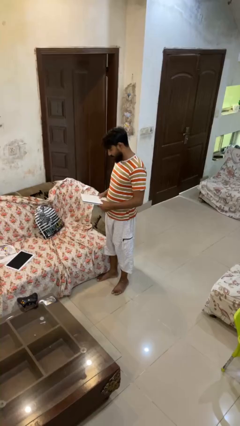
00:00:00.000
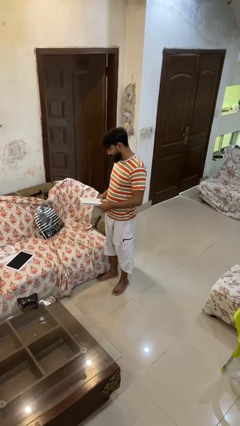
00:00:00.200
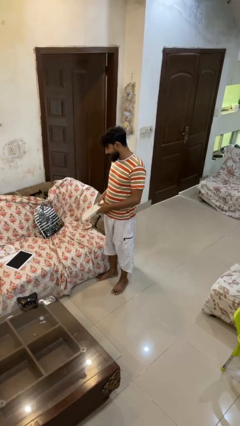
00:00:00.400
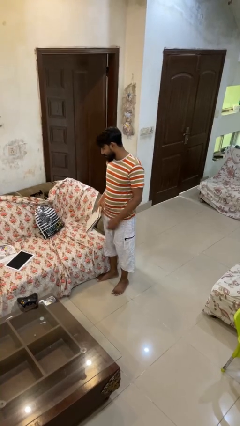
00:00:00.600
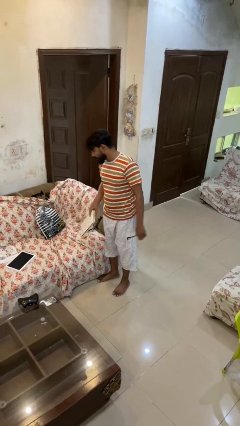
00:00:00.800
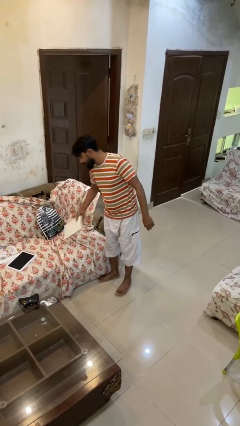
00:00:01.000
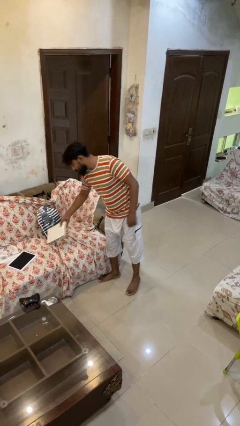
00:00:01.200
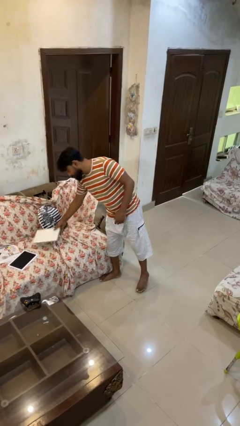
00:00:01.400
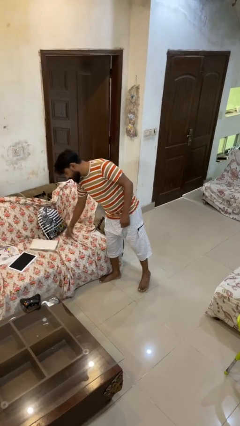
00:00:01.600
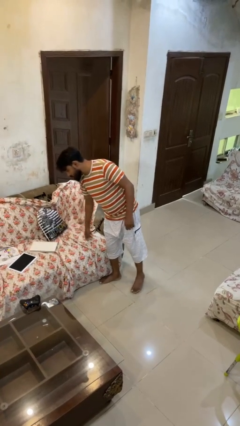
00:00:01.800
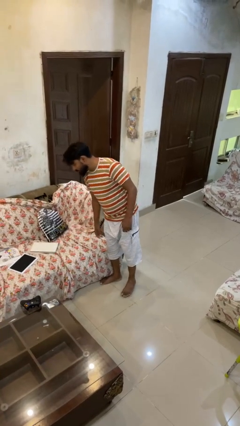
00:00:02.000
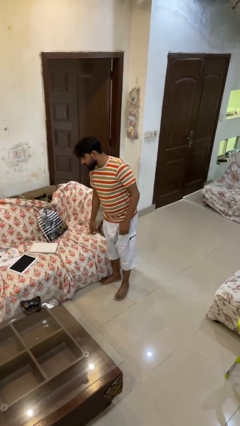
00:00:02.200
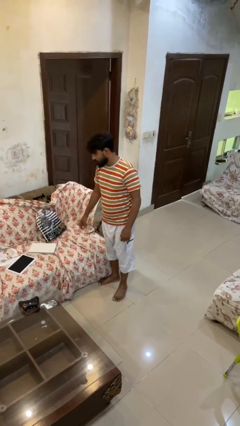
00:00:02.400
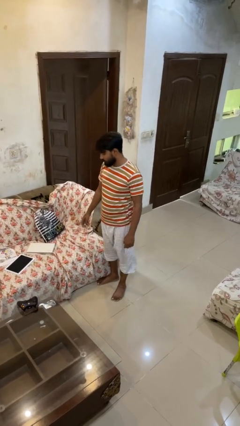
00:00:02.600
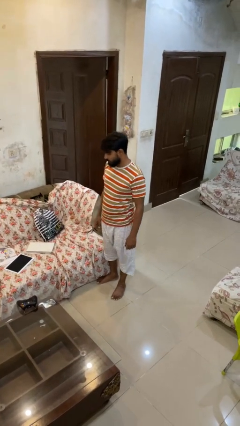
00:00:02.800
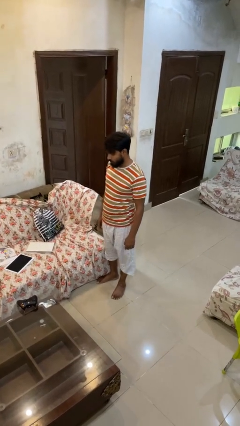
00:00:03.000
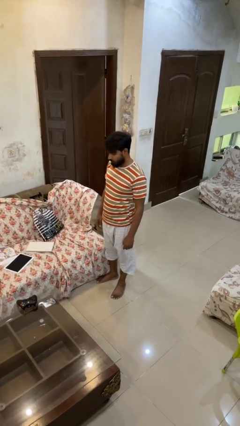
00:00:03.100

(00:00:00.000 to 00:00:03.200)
person puts down object on couch

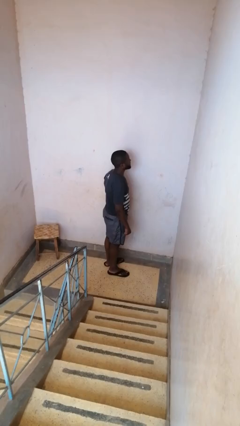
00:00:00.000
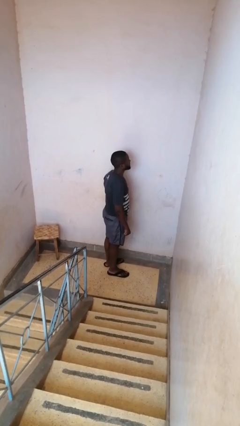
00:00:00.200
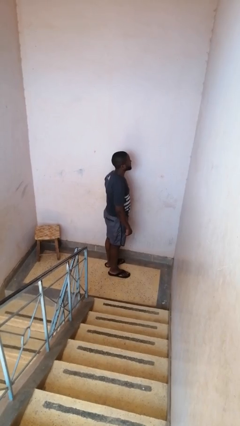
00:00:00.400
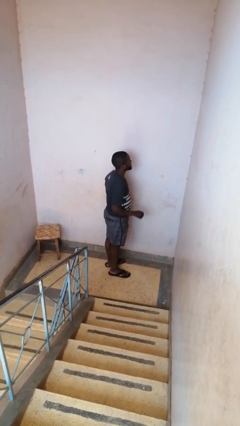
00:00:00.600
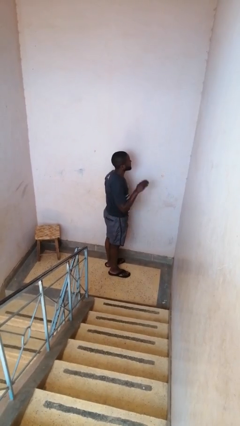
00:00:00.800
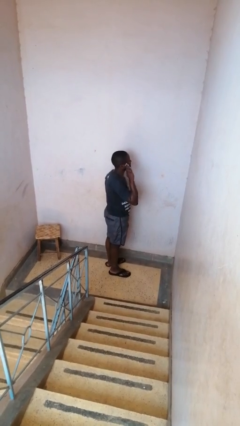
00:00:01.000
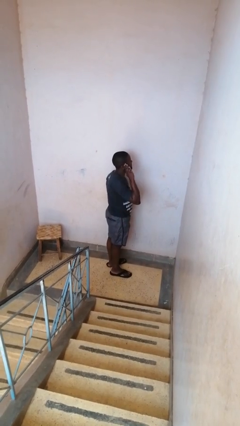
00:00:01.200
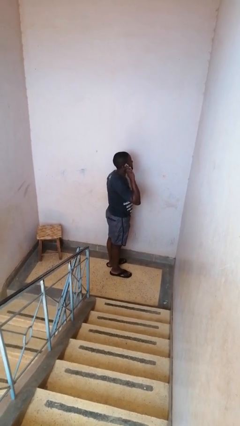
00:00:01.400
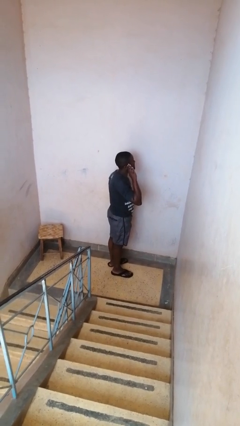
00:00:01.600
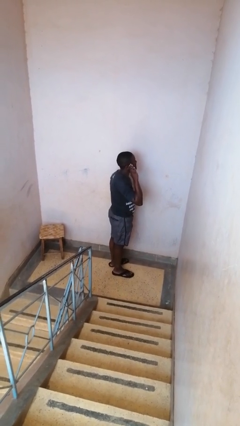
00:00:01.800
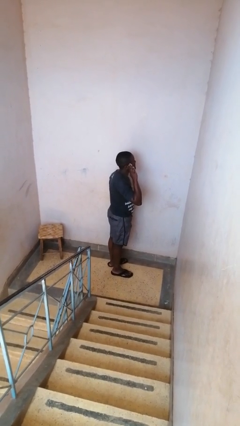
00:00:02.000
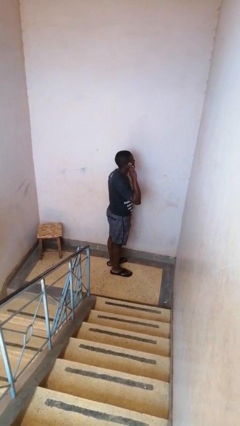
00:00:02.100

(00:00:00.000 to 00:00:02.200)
person salutes

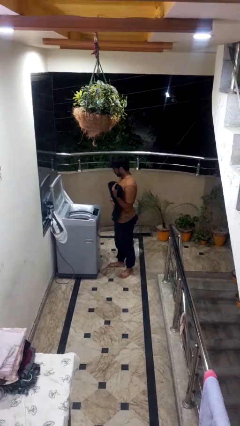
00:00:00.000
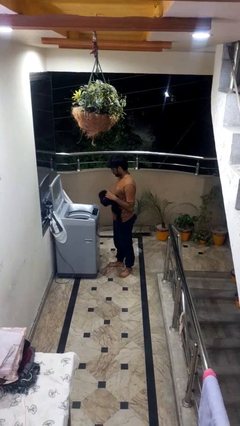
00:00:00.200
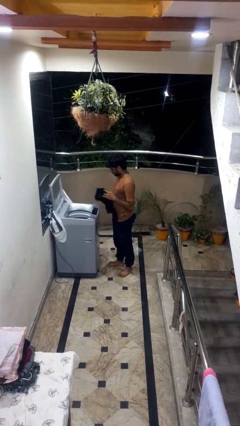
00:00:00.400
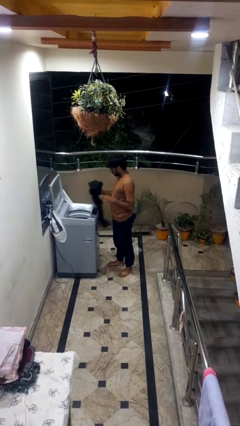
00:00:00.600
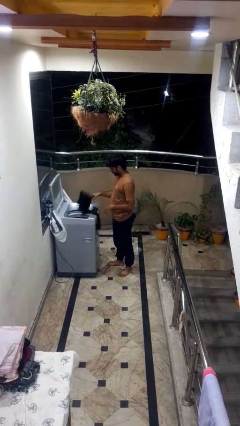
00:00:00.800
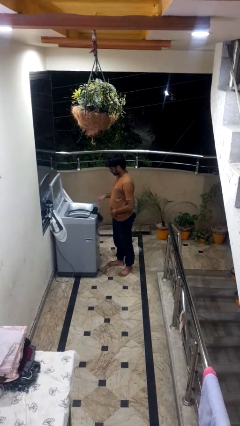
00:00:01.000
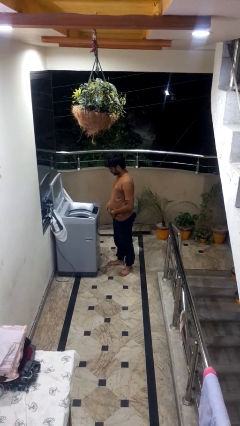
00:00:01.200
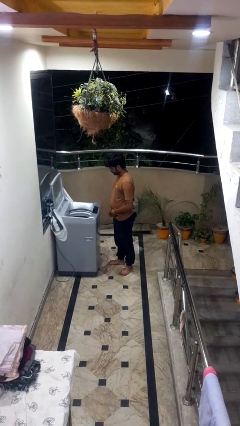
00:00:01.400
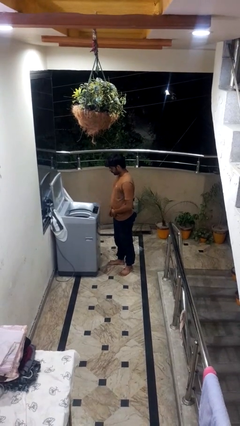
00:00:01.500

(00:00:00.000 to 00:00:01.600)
person loads clotheswasher

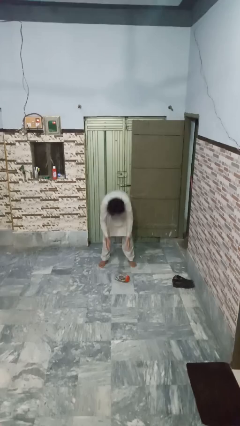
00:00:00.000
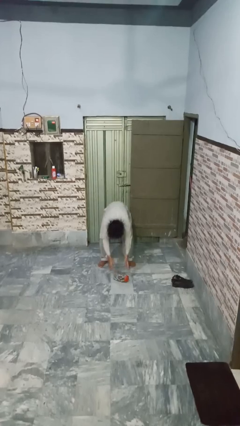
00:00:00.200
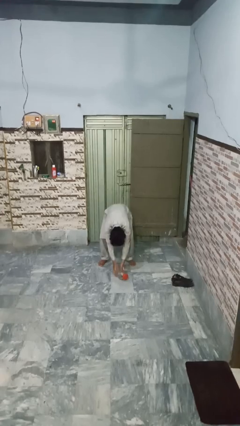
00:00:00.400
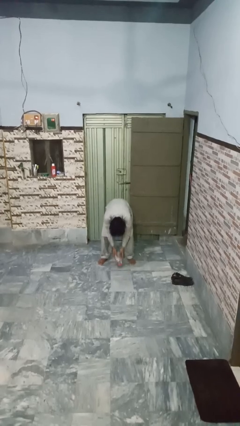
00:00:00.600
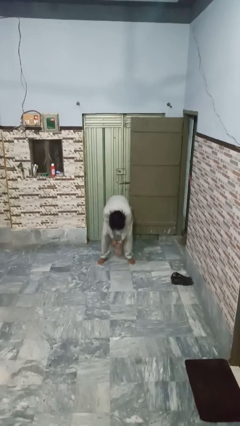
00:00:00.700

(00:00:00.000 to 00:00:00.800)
person catches dropped object

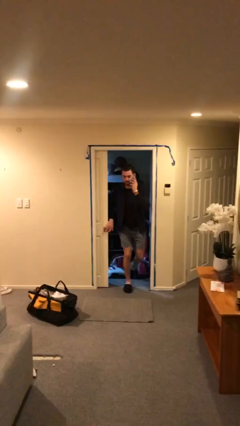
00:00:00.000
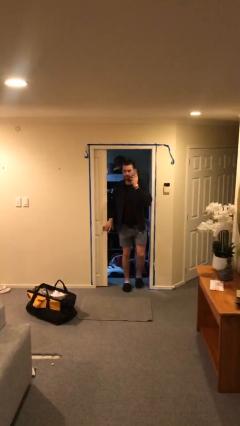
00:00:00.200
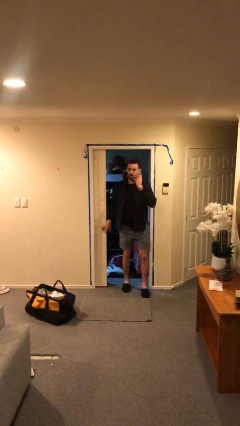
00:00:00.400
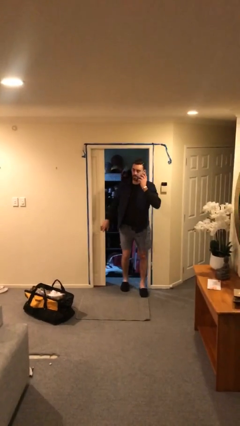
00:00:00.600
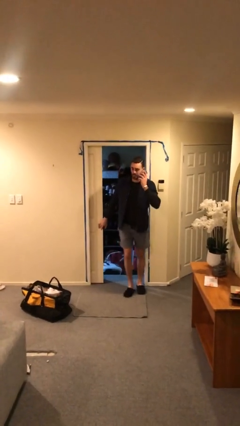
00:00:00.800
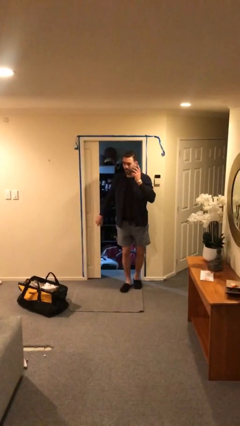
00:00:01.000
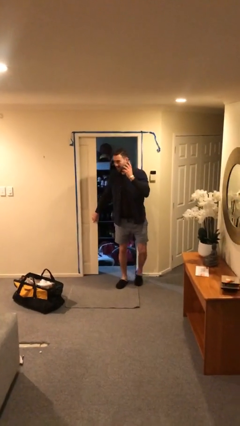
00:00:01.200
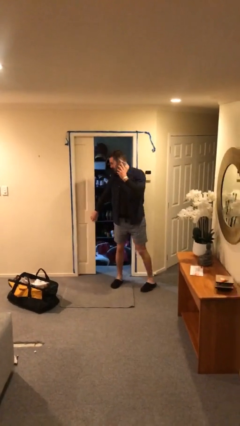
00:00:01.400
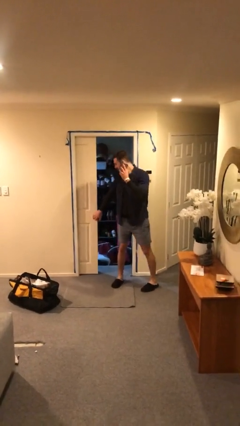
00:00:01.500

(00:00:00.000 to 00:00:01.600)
person enters scene through structure

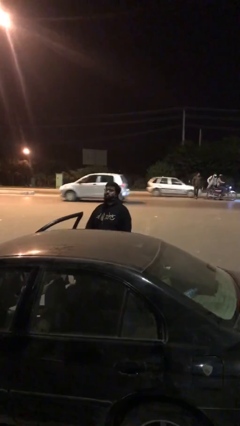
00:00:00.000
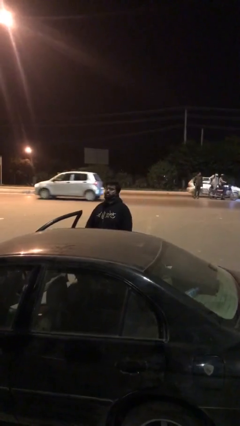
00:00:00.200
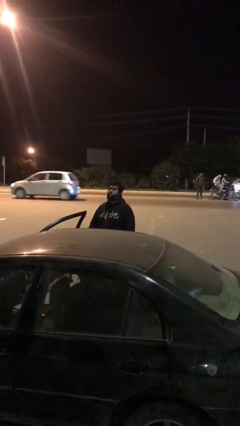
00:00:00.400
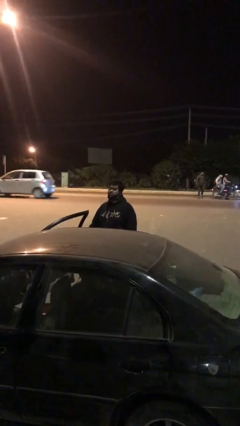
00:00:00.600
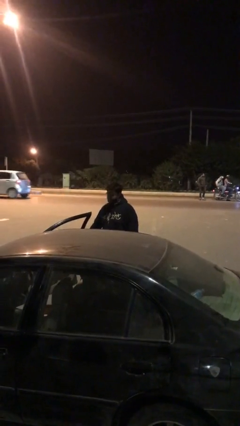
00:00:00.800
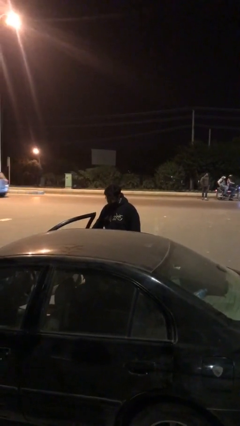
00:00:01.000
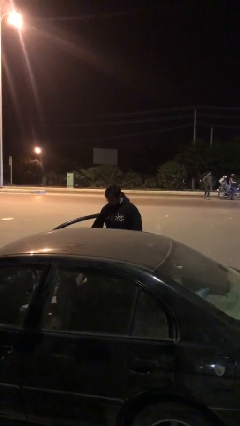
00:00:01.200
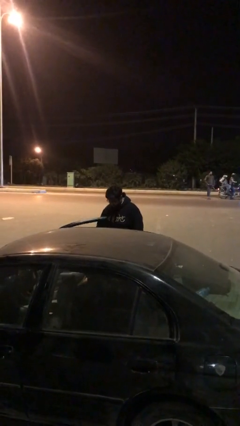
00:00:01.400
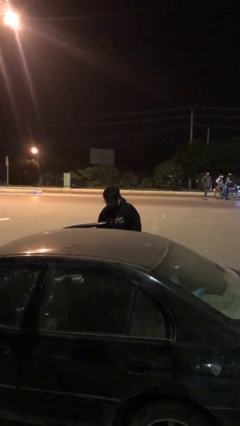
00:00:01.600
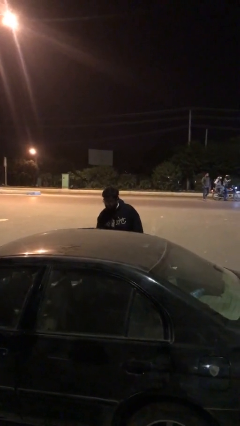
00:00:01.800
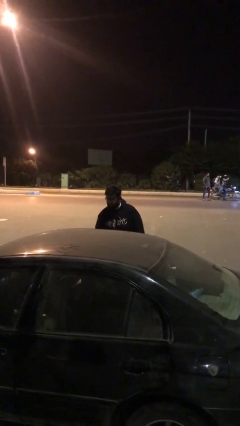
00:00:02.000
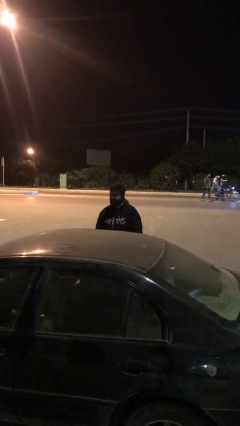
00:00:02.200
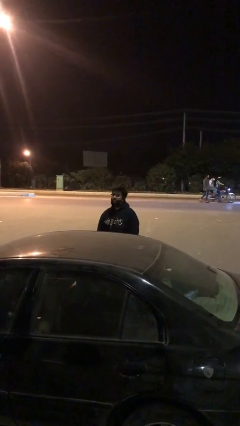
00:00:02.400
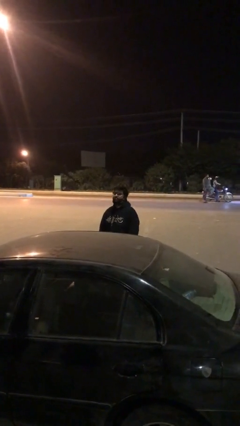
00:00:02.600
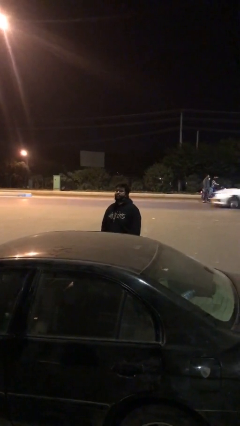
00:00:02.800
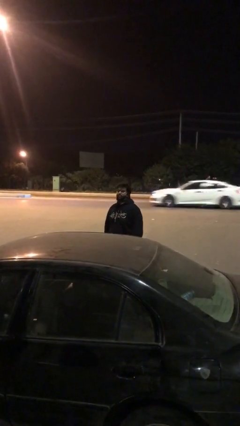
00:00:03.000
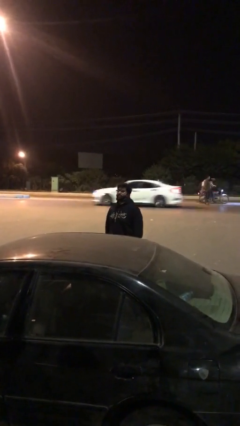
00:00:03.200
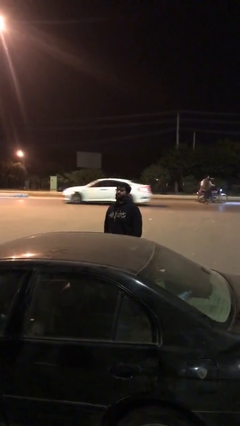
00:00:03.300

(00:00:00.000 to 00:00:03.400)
person closes car door

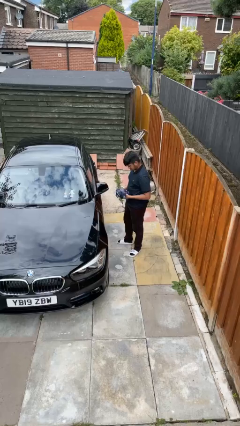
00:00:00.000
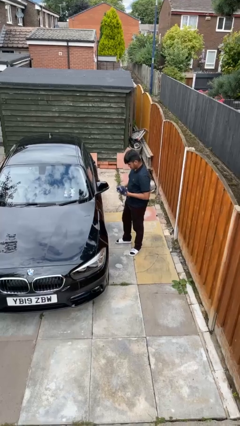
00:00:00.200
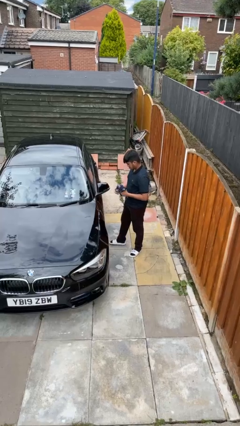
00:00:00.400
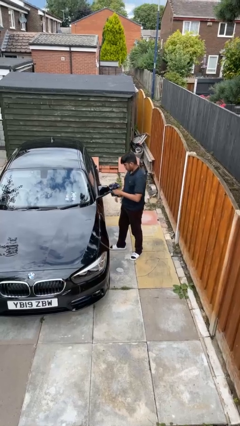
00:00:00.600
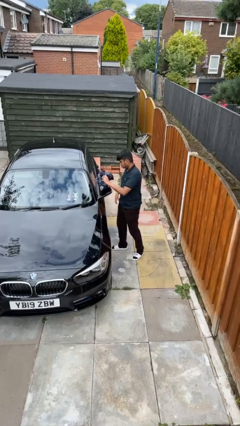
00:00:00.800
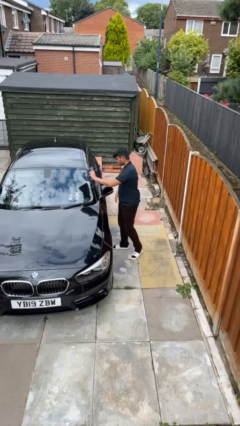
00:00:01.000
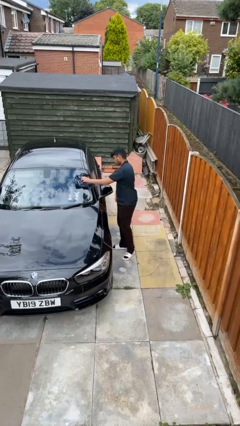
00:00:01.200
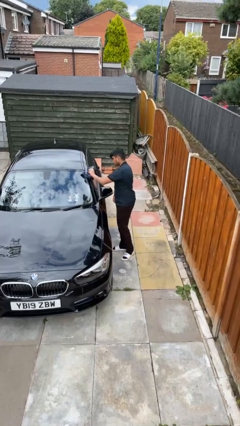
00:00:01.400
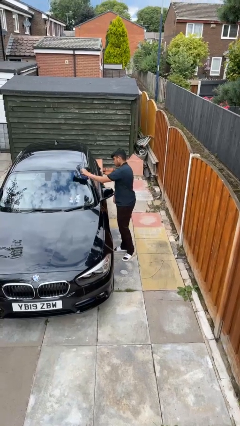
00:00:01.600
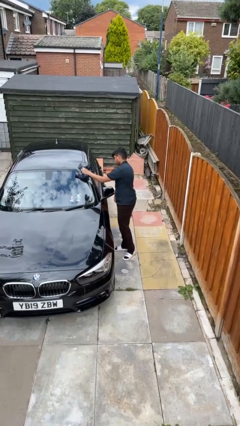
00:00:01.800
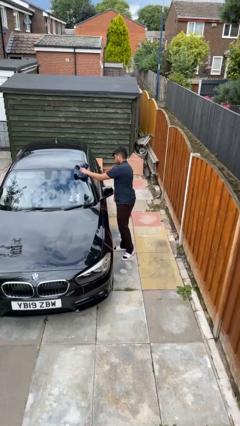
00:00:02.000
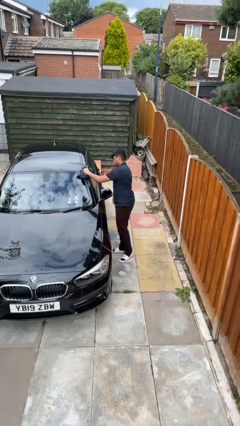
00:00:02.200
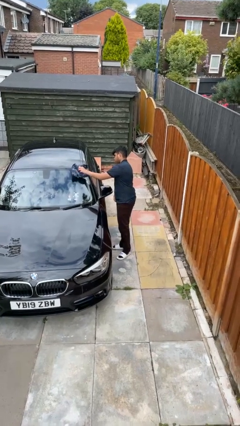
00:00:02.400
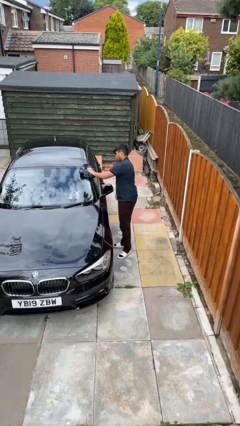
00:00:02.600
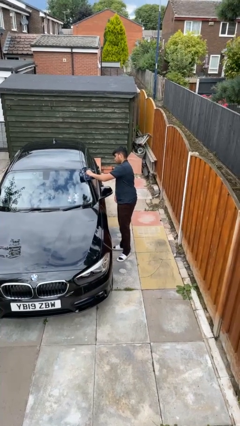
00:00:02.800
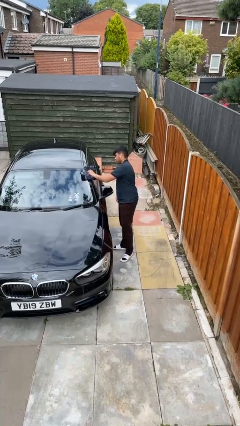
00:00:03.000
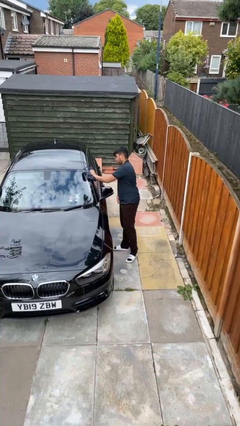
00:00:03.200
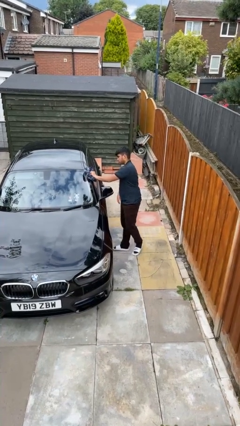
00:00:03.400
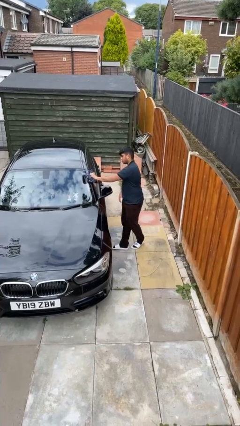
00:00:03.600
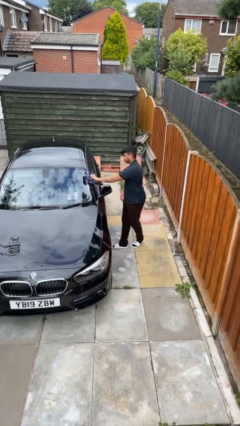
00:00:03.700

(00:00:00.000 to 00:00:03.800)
person polishes car with rag

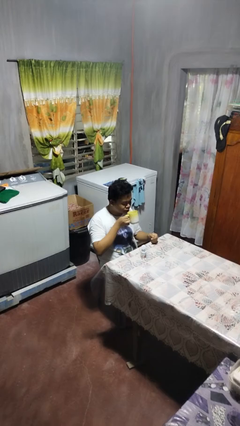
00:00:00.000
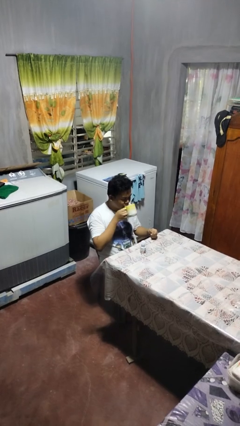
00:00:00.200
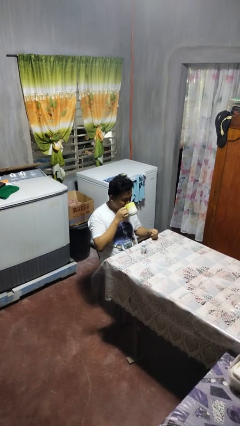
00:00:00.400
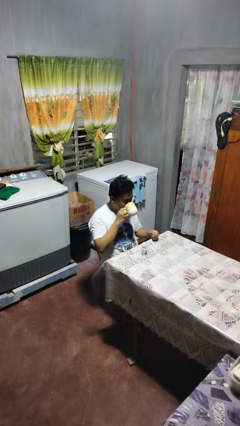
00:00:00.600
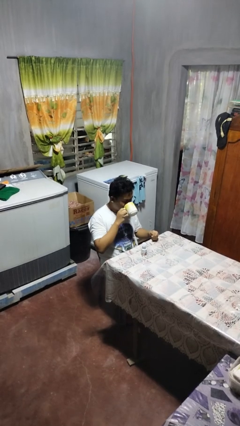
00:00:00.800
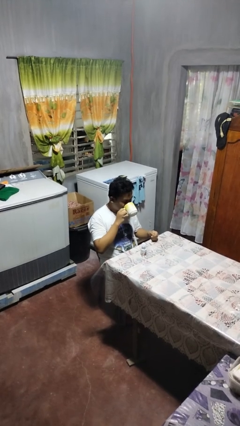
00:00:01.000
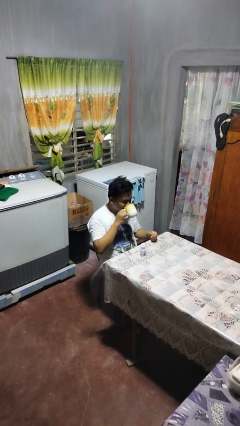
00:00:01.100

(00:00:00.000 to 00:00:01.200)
person drinks from cup
